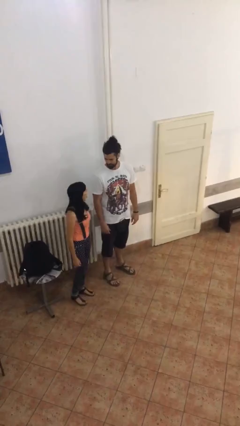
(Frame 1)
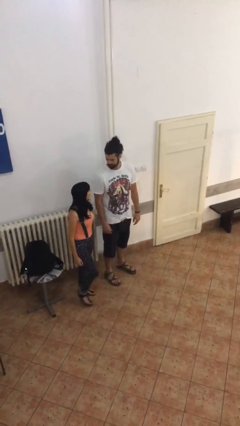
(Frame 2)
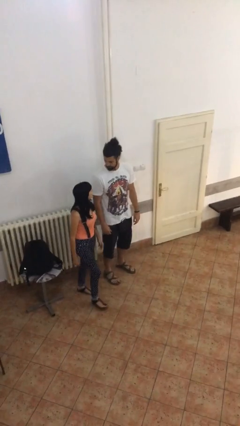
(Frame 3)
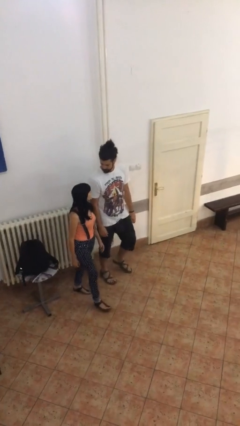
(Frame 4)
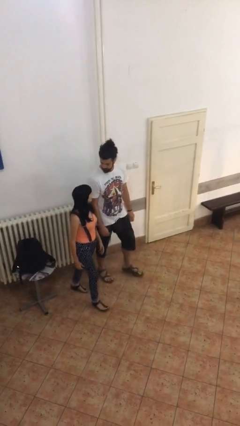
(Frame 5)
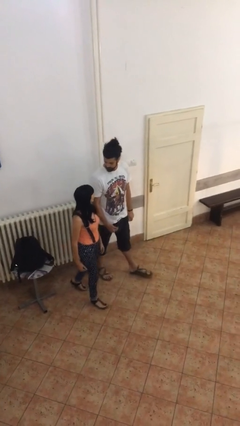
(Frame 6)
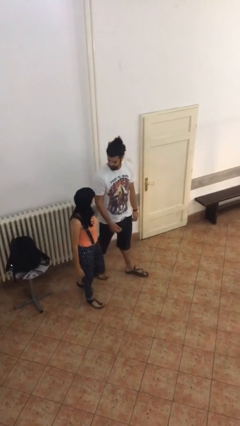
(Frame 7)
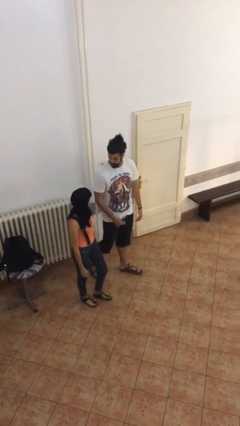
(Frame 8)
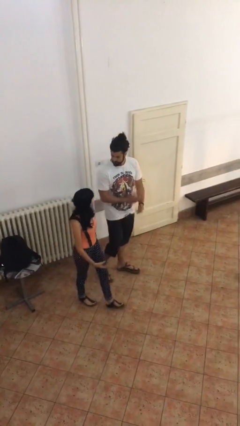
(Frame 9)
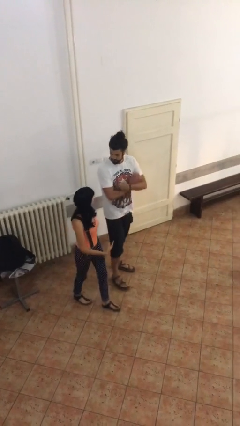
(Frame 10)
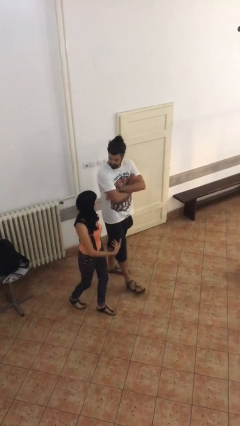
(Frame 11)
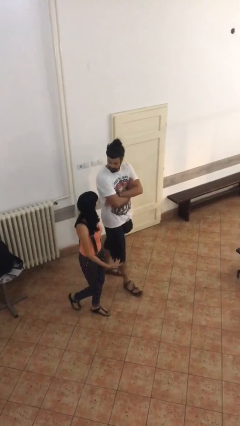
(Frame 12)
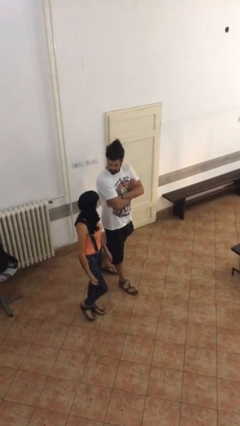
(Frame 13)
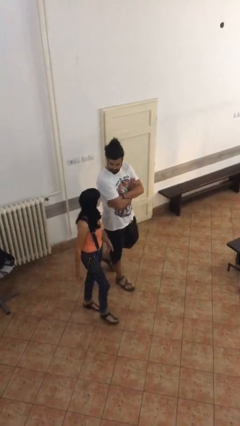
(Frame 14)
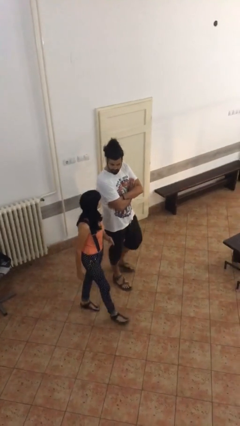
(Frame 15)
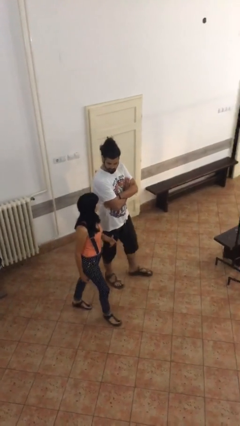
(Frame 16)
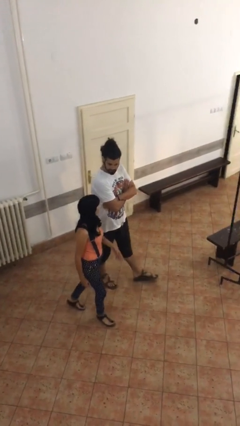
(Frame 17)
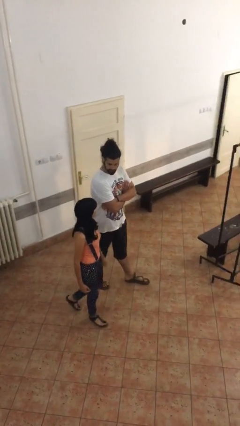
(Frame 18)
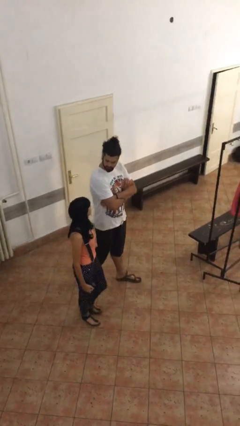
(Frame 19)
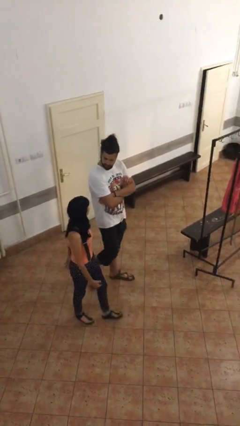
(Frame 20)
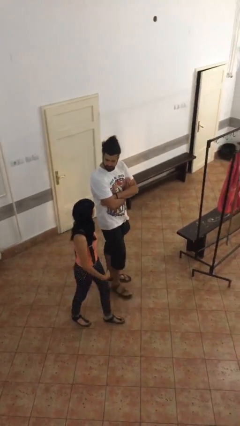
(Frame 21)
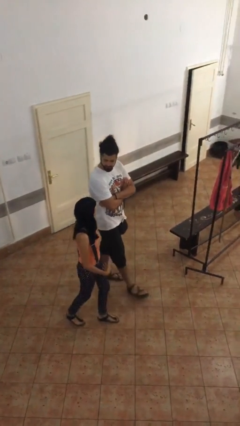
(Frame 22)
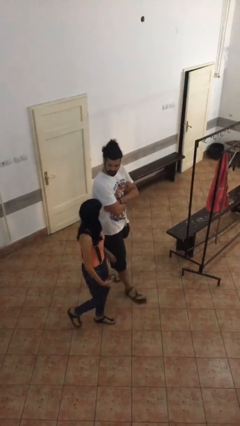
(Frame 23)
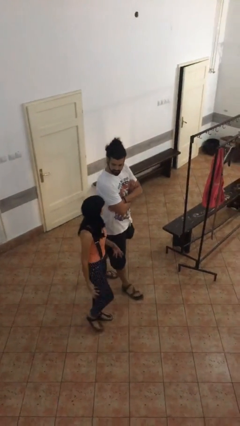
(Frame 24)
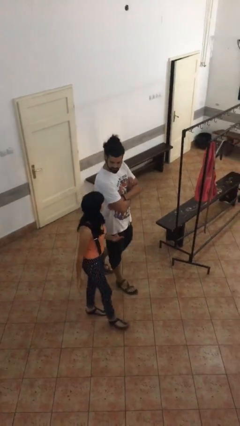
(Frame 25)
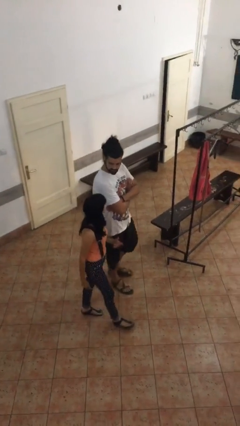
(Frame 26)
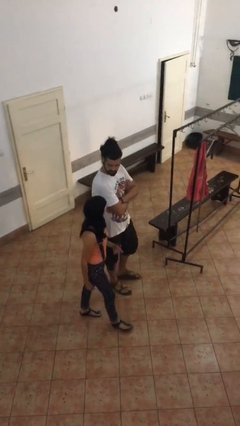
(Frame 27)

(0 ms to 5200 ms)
person talks to person

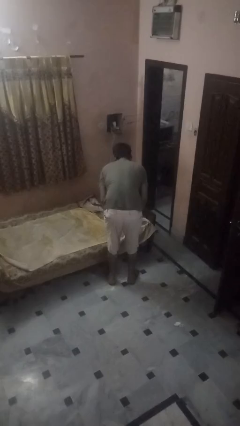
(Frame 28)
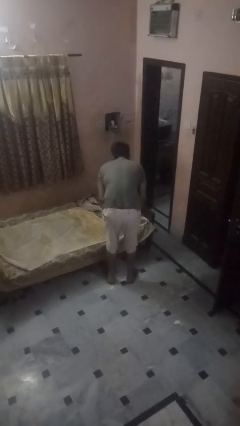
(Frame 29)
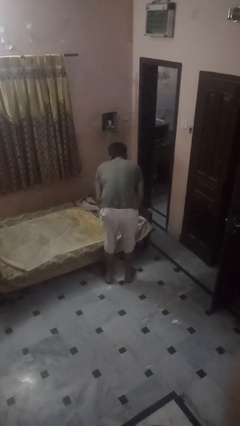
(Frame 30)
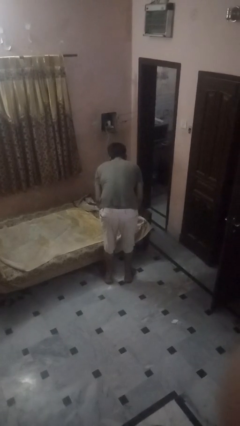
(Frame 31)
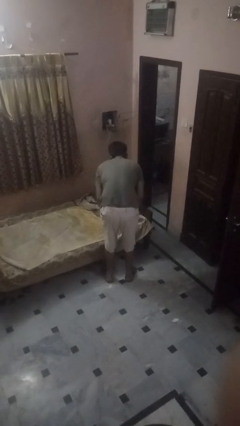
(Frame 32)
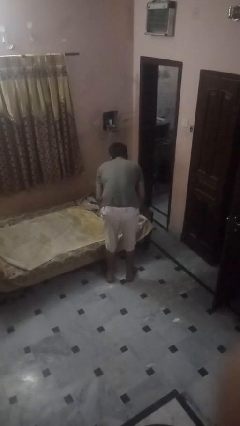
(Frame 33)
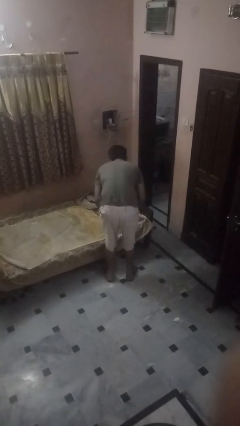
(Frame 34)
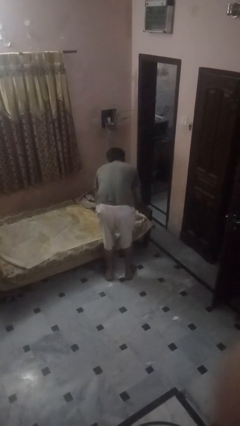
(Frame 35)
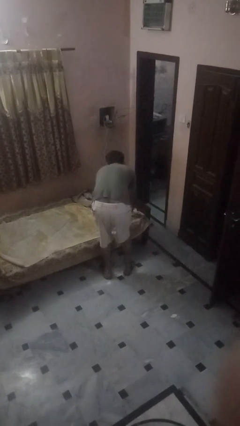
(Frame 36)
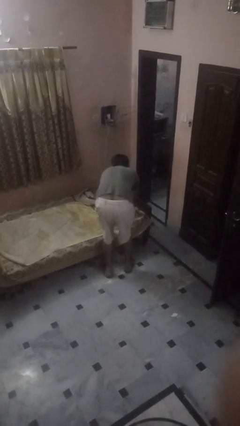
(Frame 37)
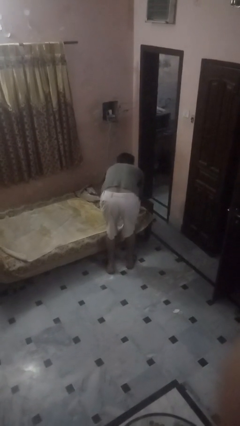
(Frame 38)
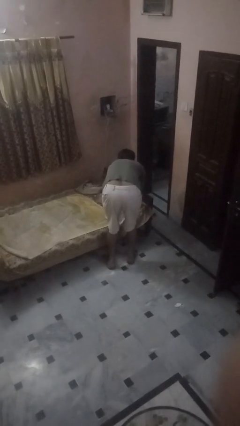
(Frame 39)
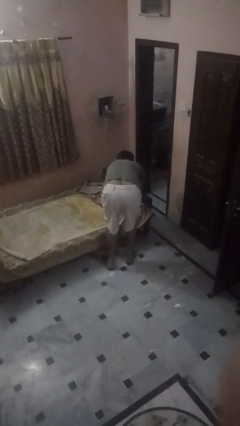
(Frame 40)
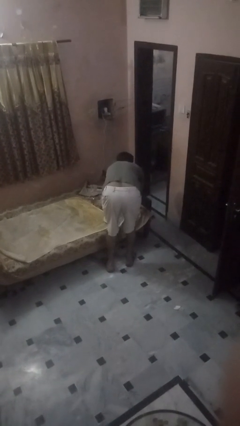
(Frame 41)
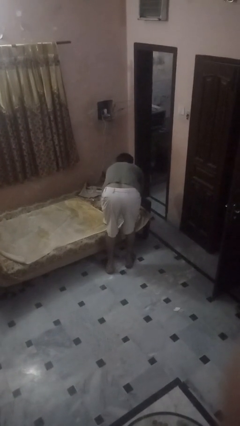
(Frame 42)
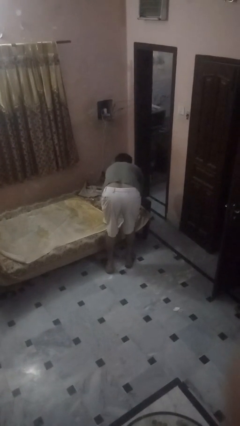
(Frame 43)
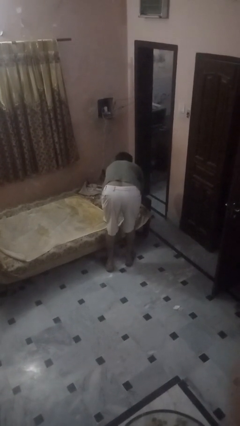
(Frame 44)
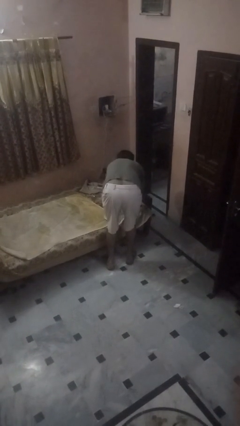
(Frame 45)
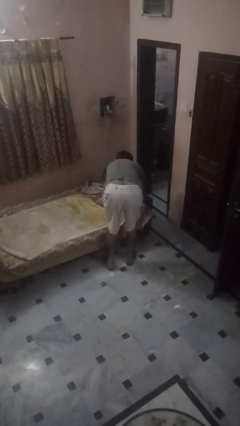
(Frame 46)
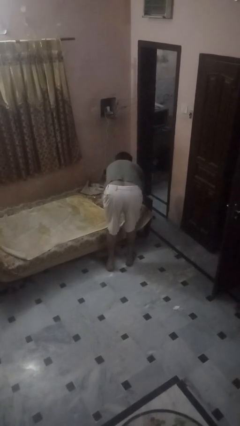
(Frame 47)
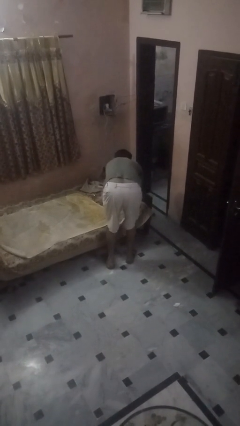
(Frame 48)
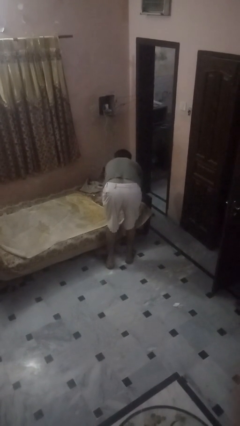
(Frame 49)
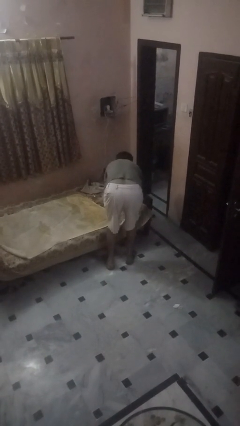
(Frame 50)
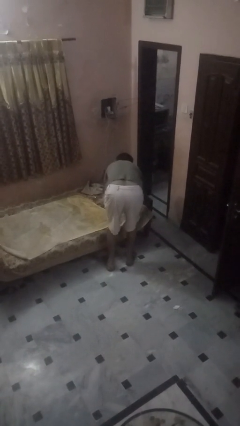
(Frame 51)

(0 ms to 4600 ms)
person makes bed

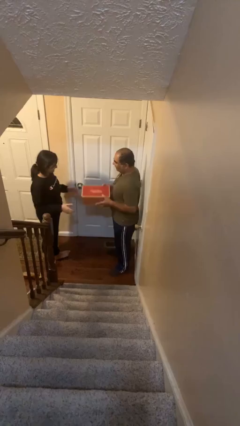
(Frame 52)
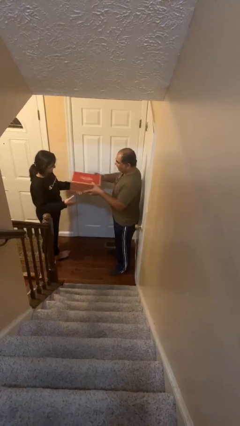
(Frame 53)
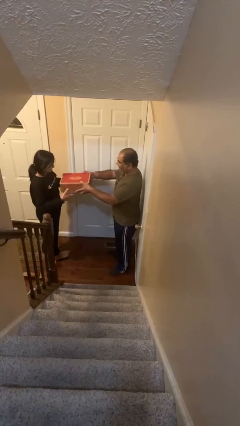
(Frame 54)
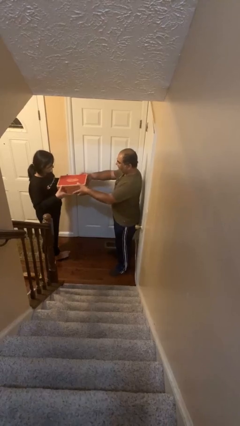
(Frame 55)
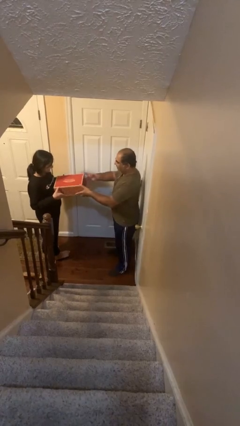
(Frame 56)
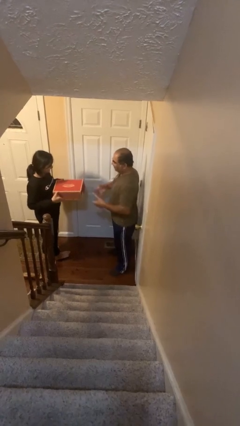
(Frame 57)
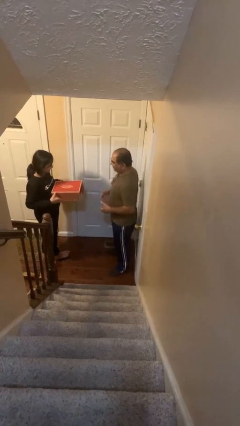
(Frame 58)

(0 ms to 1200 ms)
person transfers object to person

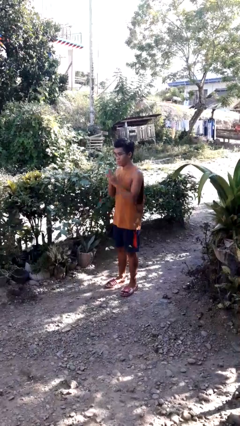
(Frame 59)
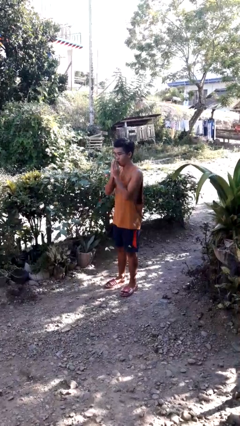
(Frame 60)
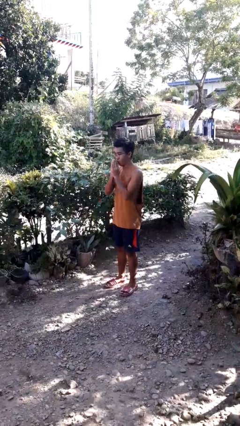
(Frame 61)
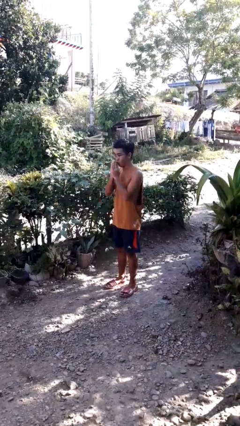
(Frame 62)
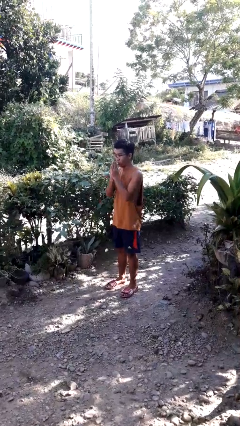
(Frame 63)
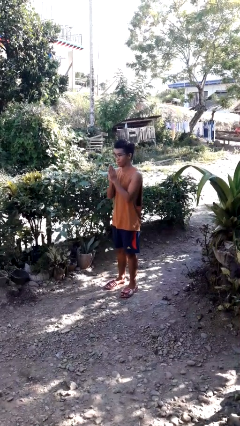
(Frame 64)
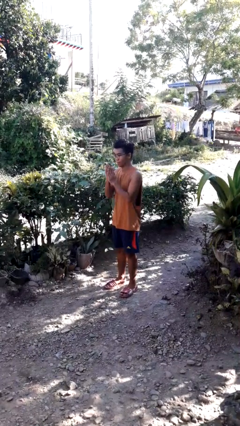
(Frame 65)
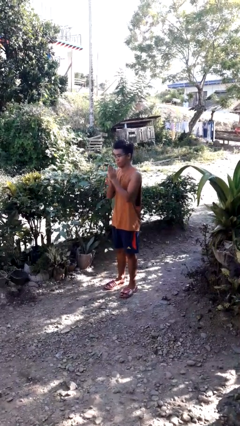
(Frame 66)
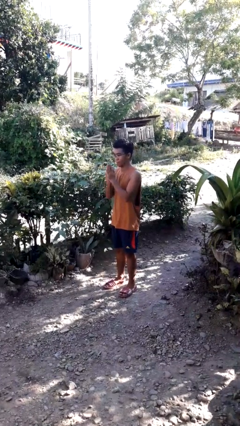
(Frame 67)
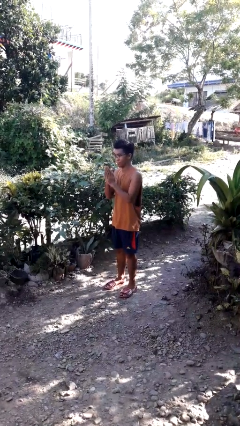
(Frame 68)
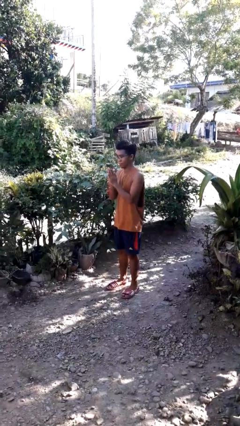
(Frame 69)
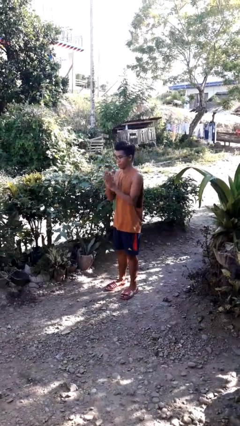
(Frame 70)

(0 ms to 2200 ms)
person blows into hands

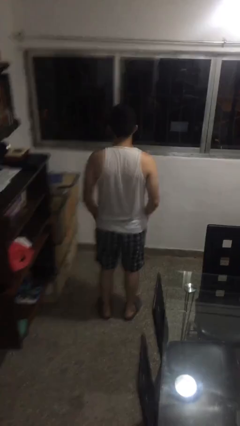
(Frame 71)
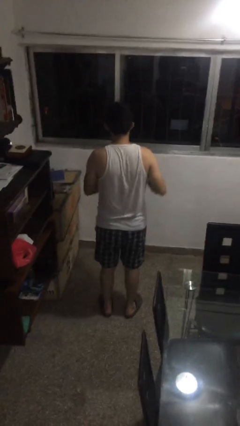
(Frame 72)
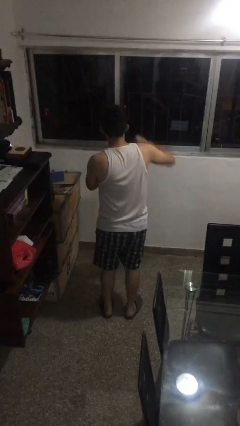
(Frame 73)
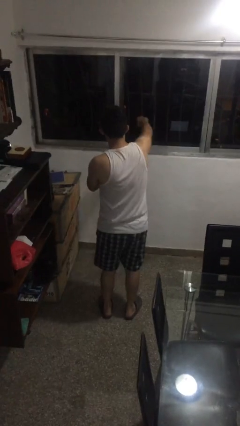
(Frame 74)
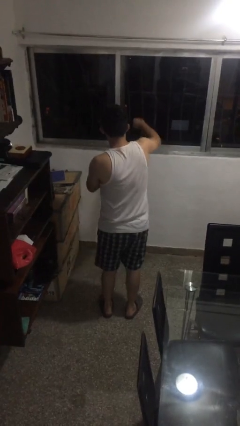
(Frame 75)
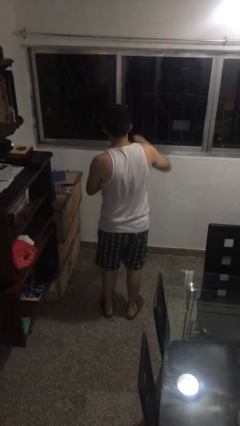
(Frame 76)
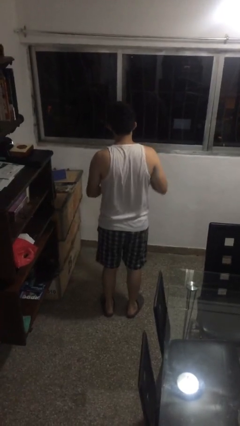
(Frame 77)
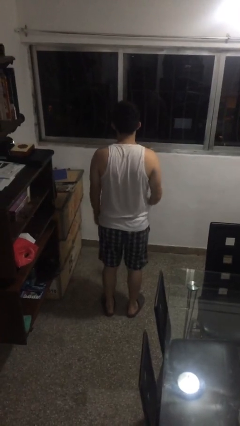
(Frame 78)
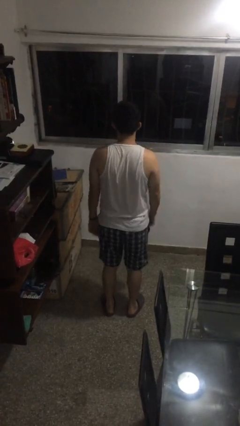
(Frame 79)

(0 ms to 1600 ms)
person punches

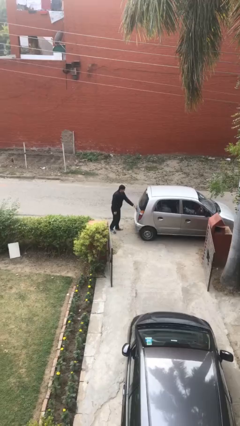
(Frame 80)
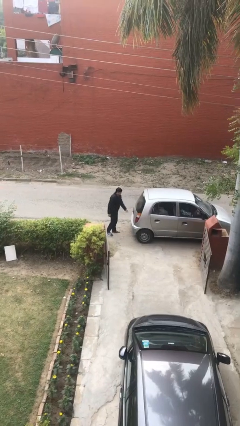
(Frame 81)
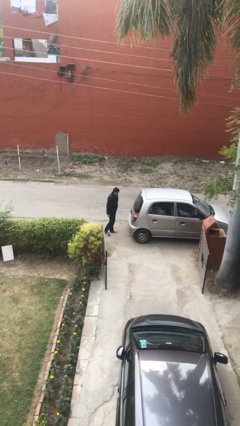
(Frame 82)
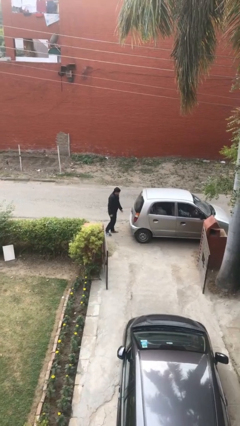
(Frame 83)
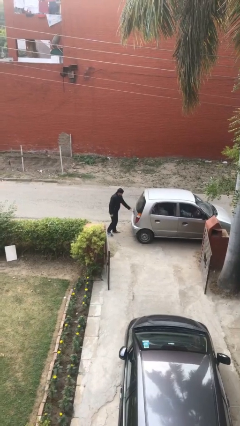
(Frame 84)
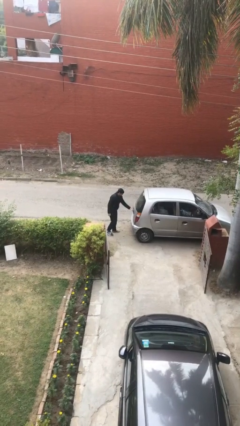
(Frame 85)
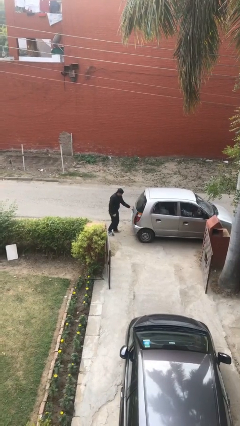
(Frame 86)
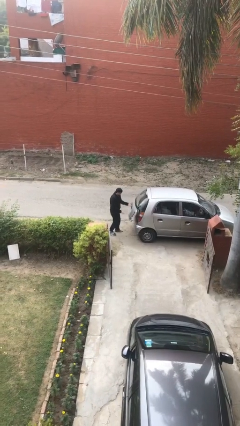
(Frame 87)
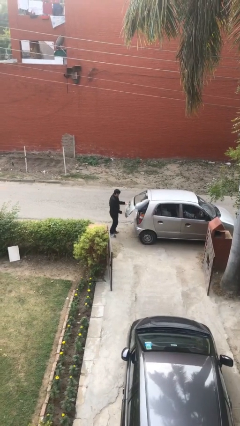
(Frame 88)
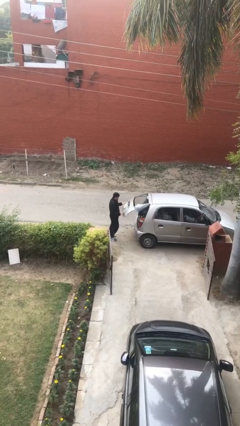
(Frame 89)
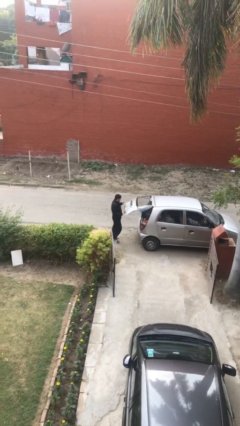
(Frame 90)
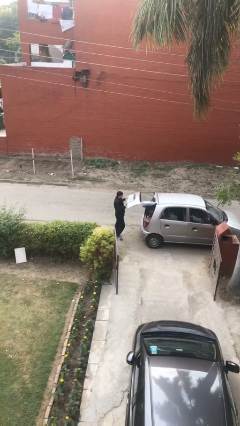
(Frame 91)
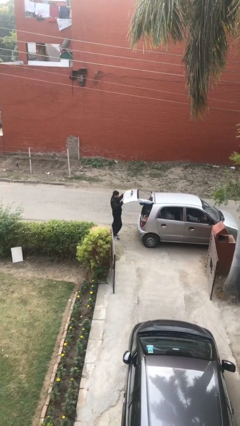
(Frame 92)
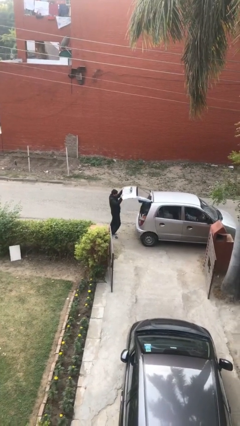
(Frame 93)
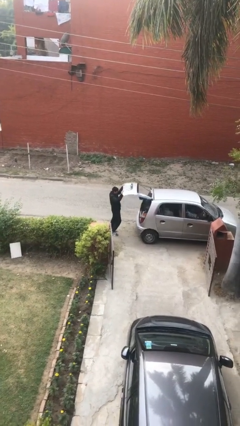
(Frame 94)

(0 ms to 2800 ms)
person opens car trunk
